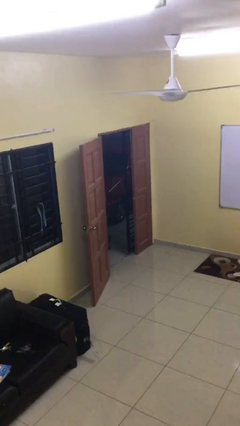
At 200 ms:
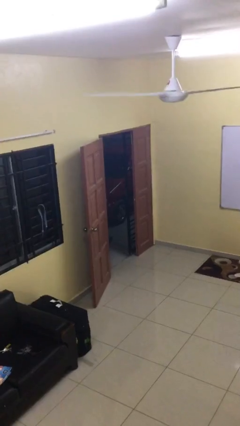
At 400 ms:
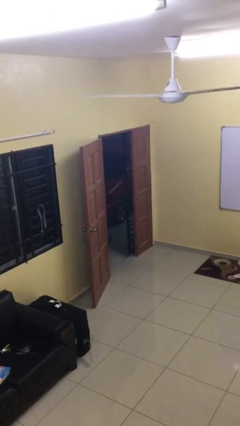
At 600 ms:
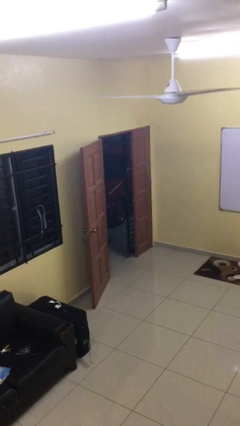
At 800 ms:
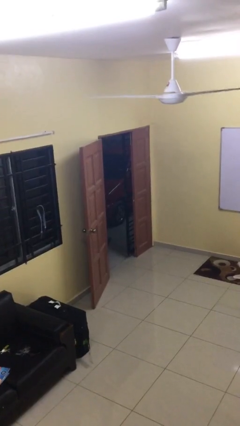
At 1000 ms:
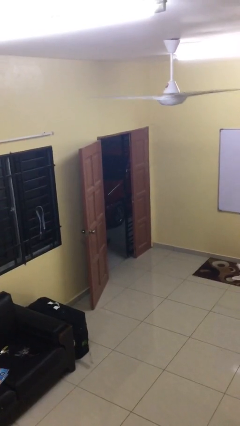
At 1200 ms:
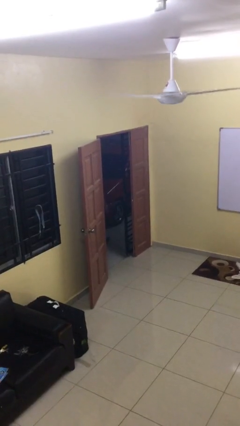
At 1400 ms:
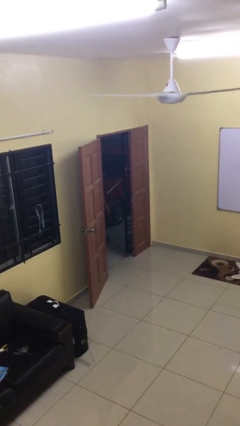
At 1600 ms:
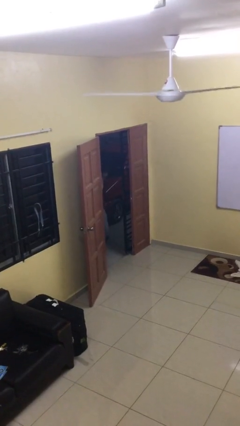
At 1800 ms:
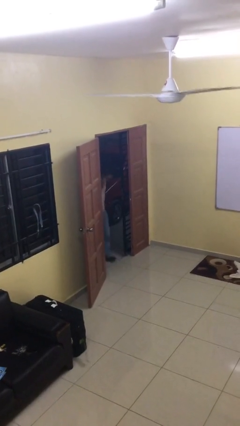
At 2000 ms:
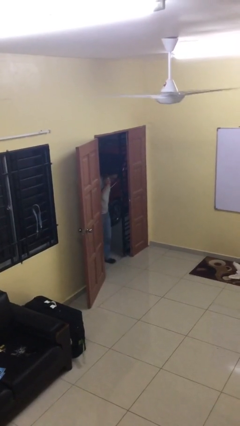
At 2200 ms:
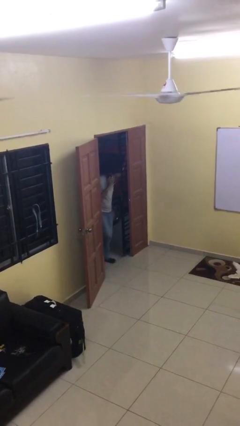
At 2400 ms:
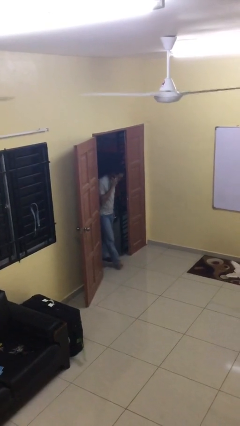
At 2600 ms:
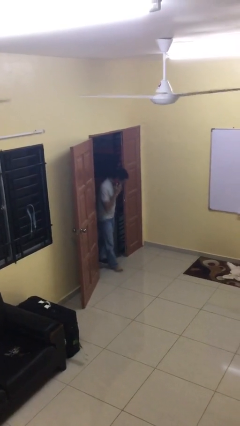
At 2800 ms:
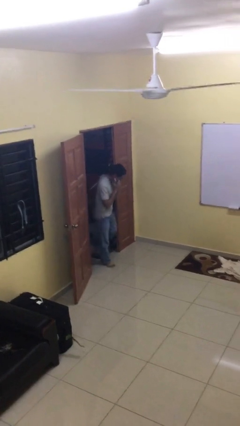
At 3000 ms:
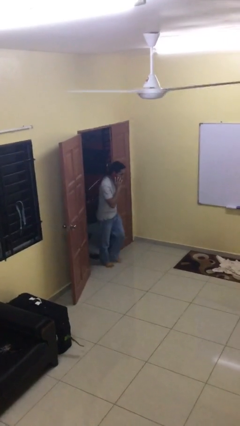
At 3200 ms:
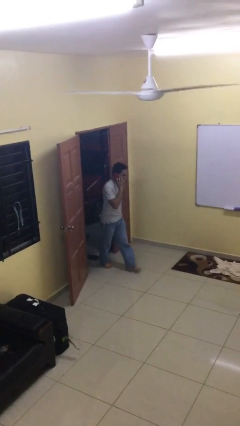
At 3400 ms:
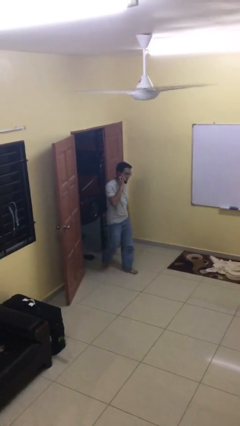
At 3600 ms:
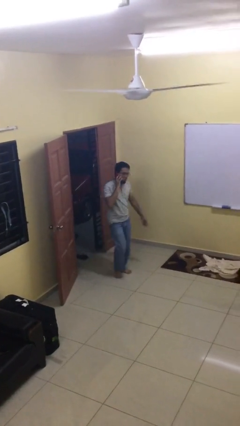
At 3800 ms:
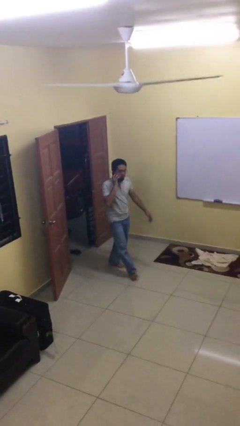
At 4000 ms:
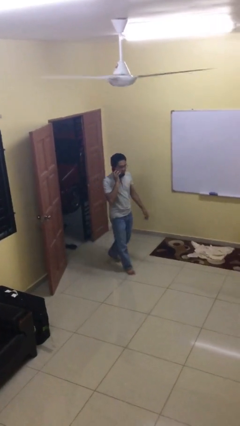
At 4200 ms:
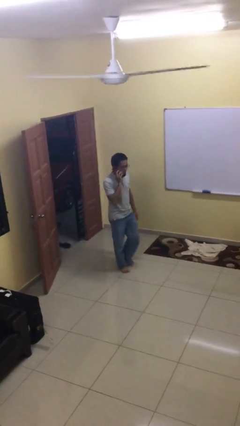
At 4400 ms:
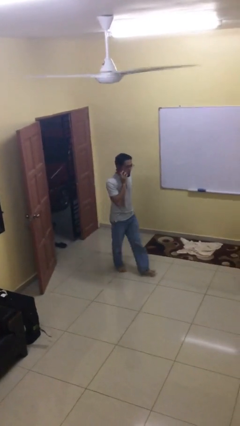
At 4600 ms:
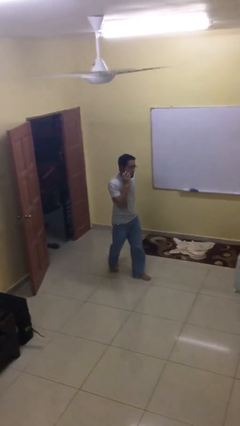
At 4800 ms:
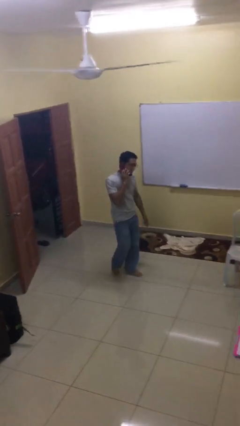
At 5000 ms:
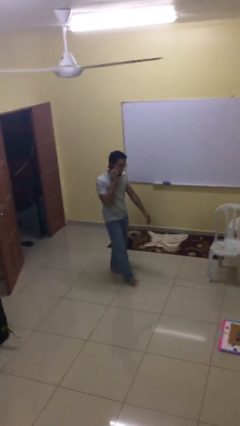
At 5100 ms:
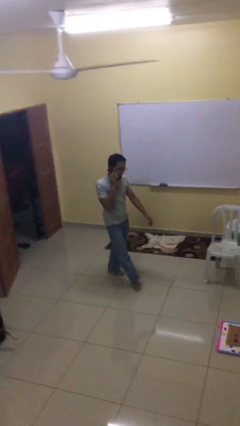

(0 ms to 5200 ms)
person enters scene through structure

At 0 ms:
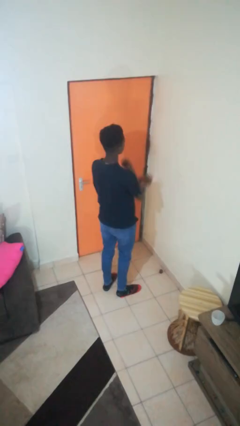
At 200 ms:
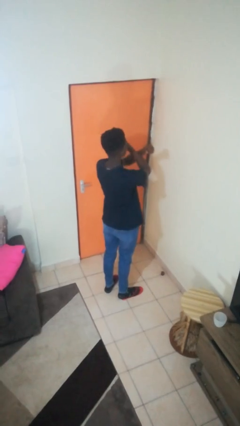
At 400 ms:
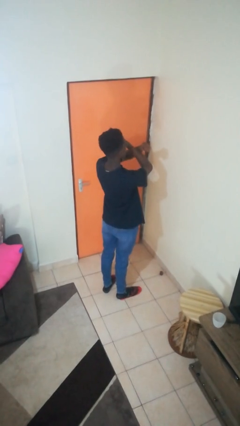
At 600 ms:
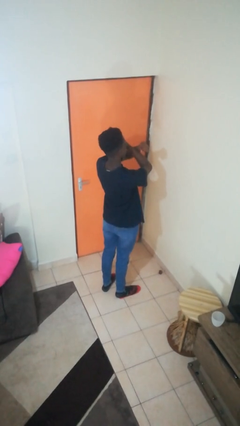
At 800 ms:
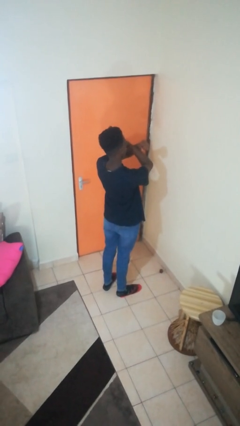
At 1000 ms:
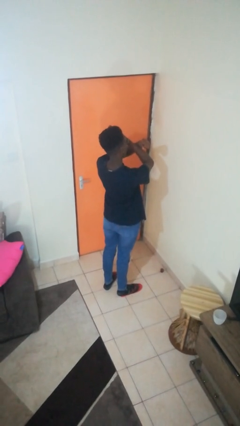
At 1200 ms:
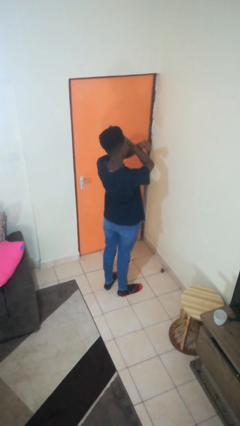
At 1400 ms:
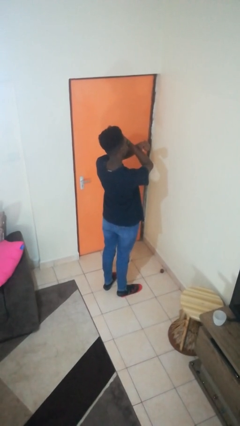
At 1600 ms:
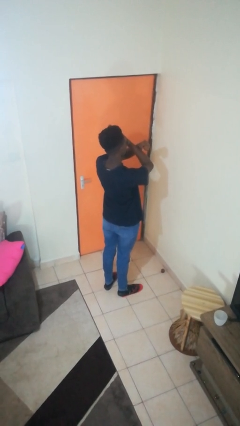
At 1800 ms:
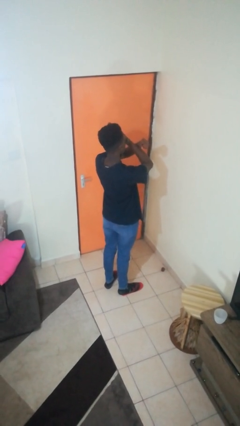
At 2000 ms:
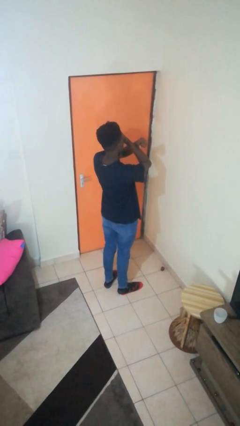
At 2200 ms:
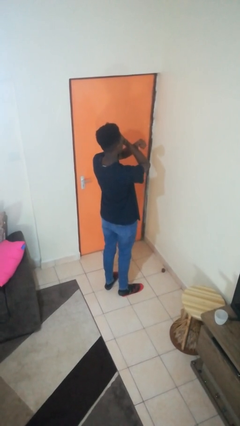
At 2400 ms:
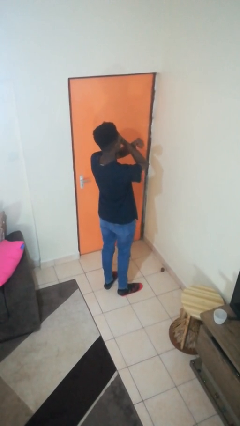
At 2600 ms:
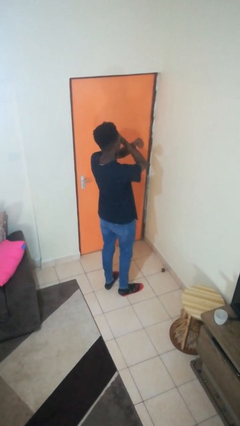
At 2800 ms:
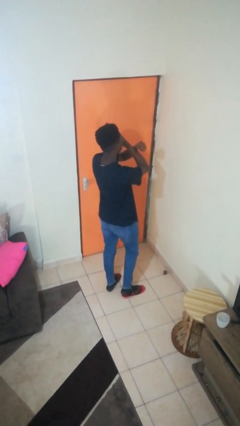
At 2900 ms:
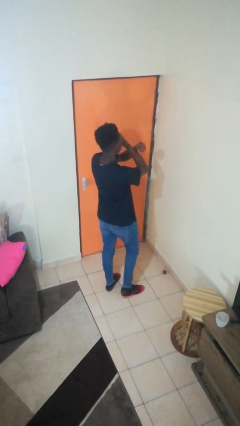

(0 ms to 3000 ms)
person gestures arms x

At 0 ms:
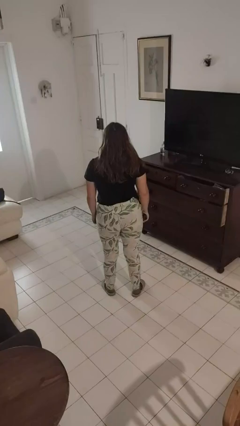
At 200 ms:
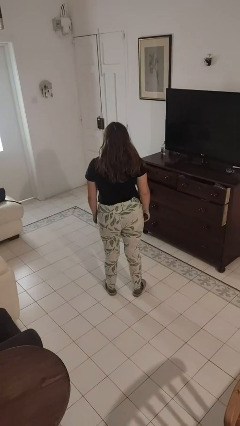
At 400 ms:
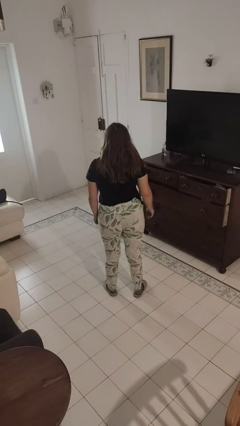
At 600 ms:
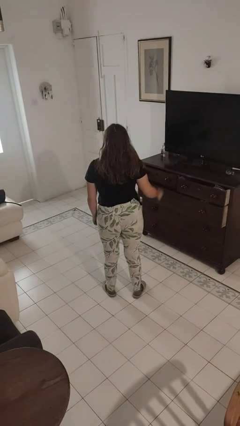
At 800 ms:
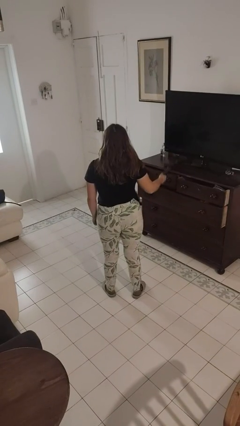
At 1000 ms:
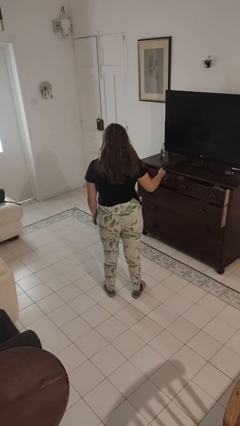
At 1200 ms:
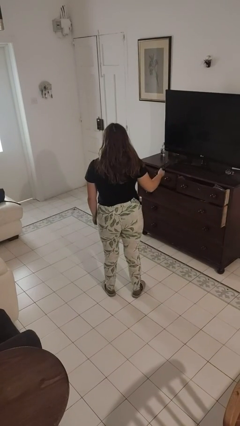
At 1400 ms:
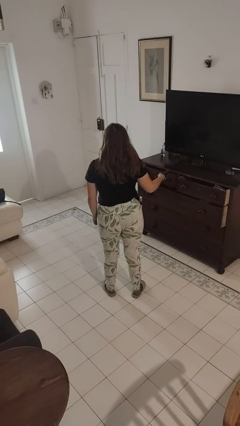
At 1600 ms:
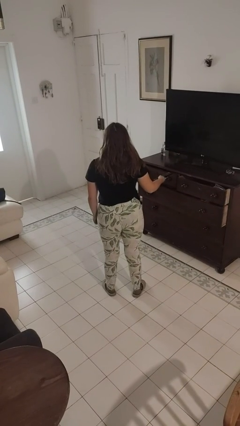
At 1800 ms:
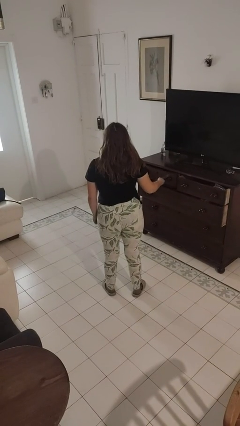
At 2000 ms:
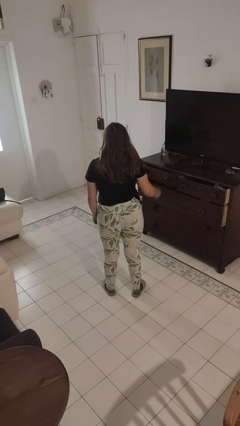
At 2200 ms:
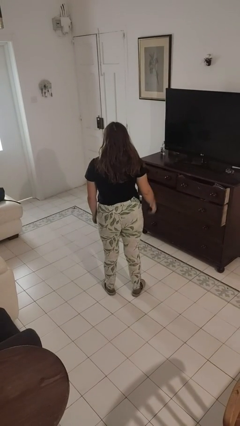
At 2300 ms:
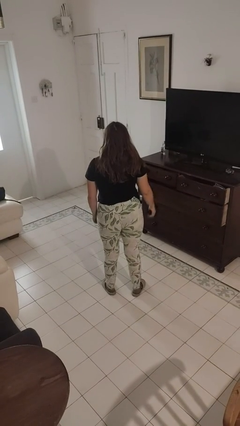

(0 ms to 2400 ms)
person uses television remote

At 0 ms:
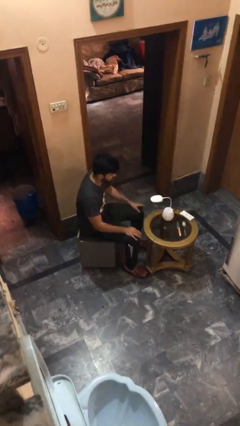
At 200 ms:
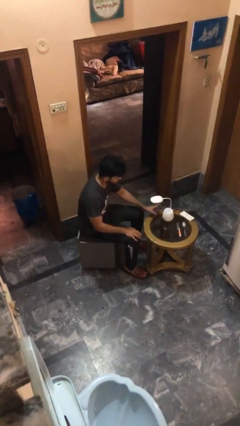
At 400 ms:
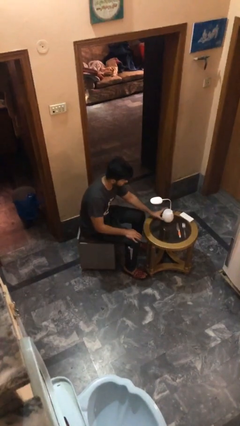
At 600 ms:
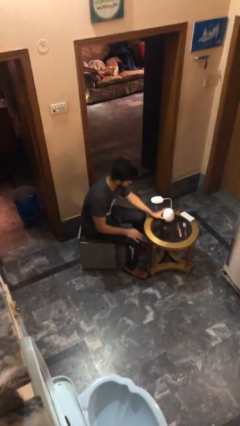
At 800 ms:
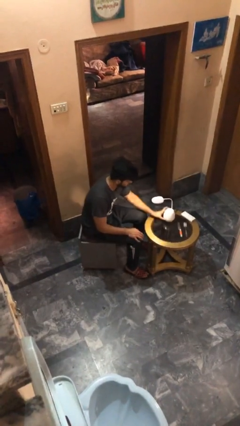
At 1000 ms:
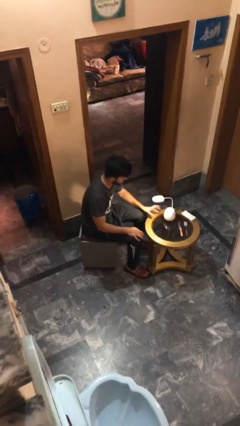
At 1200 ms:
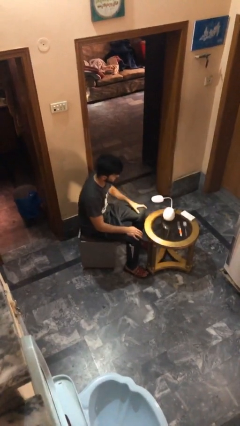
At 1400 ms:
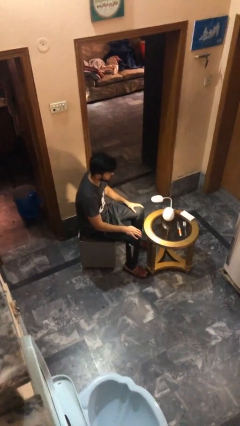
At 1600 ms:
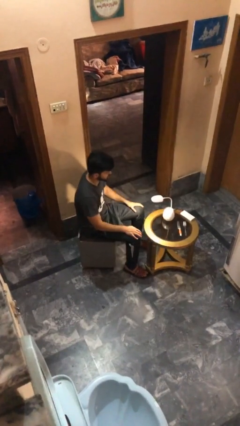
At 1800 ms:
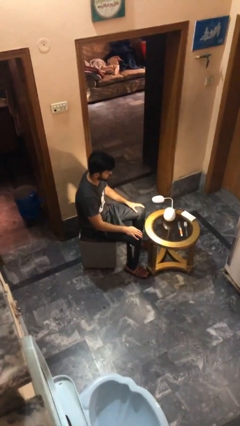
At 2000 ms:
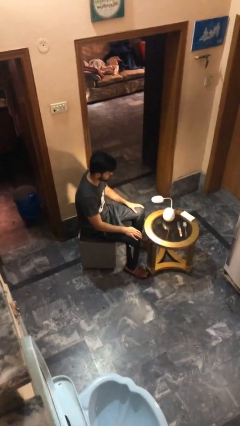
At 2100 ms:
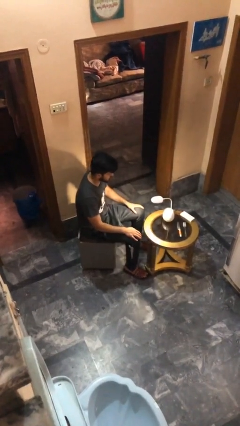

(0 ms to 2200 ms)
person turns on lamp

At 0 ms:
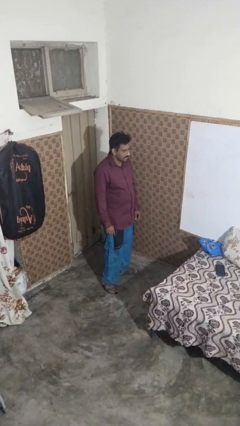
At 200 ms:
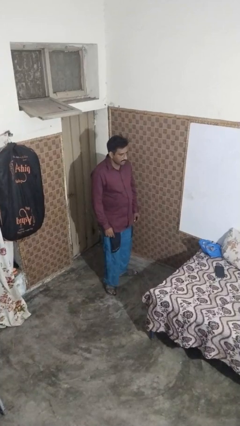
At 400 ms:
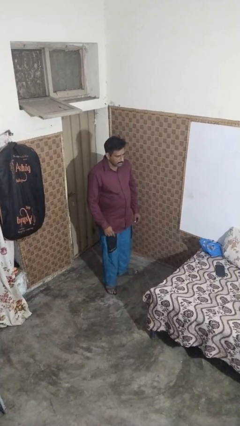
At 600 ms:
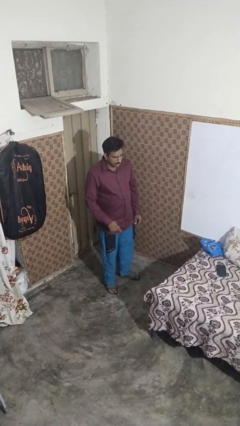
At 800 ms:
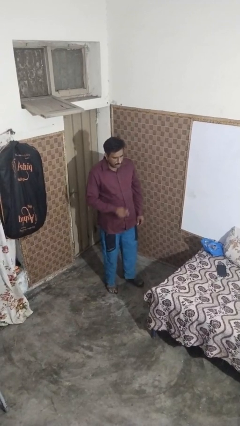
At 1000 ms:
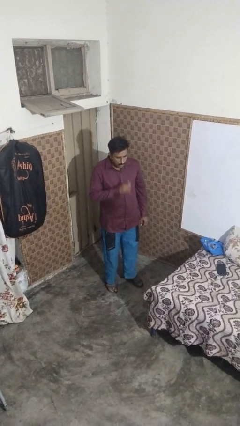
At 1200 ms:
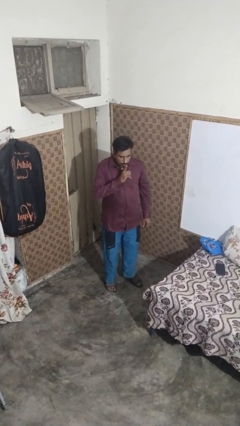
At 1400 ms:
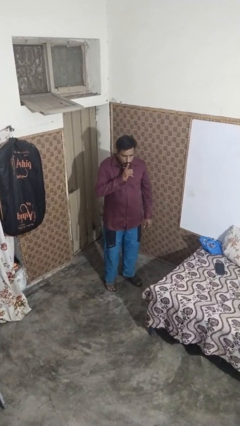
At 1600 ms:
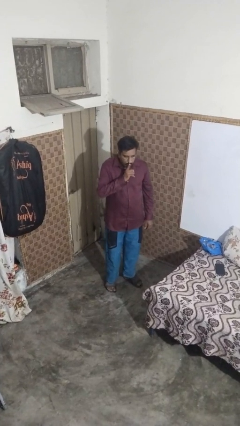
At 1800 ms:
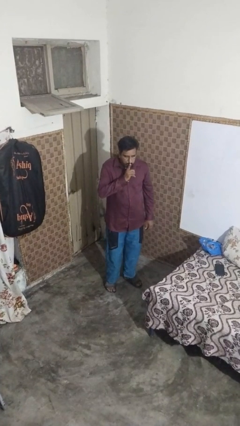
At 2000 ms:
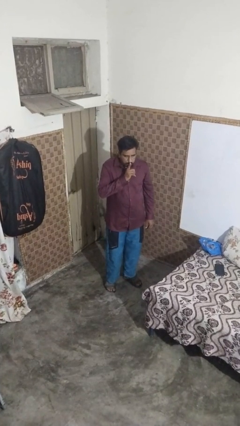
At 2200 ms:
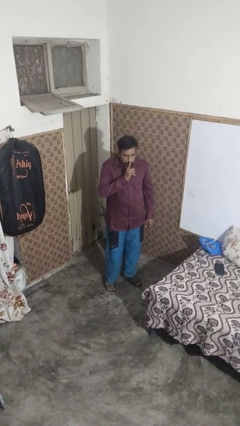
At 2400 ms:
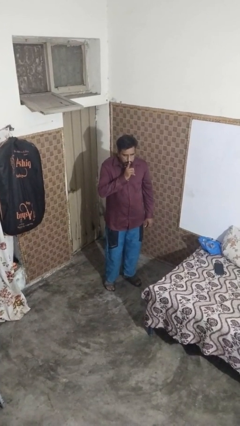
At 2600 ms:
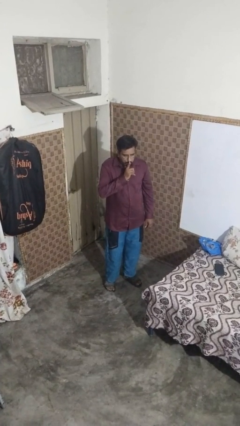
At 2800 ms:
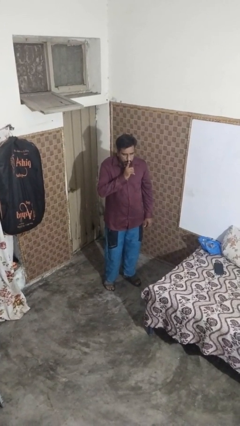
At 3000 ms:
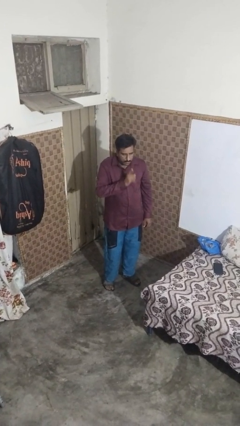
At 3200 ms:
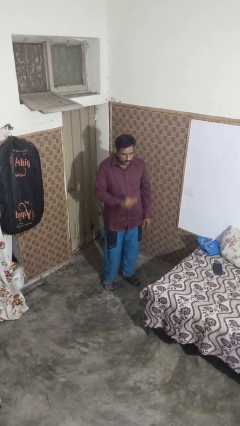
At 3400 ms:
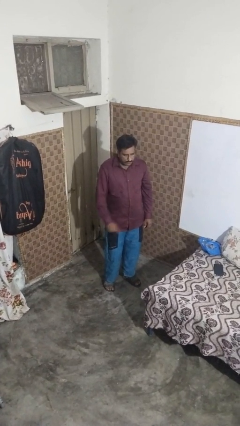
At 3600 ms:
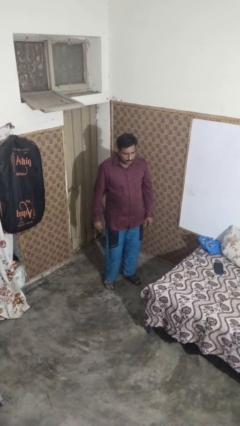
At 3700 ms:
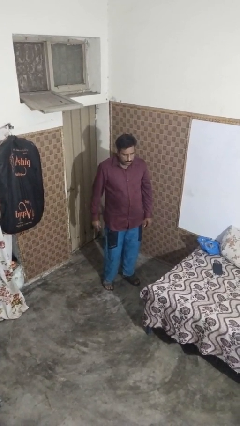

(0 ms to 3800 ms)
person gestures be quiet

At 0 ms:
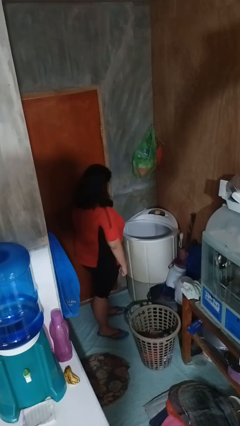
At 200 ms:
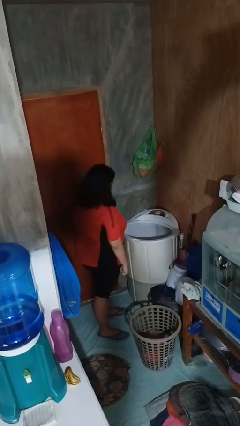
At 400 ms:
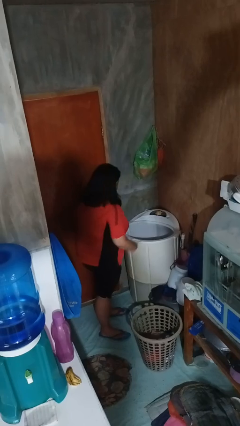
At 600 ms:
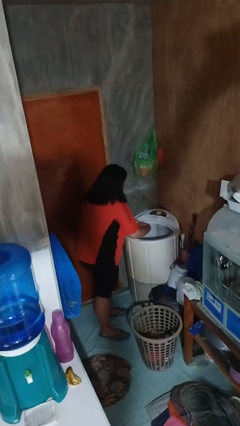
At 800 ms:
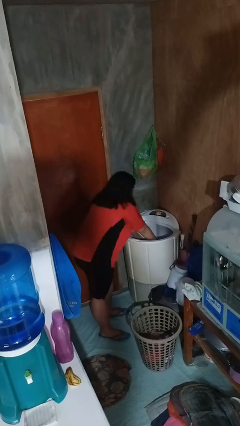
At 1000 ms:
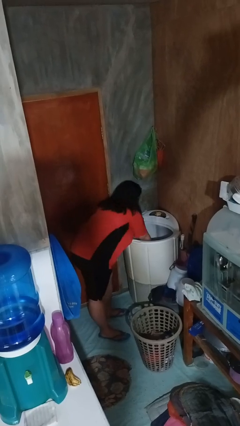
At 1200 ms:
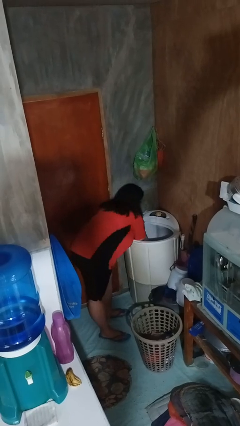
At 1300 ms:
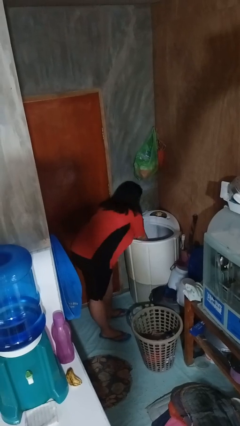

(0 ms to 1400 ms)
person loads clotheswasher
